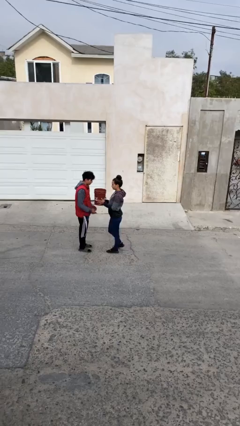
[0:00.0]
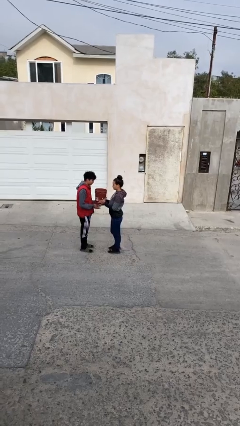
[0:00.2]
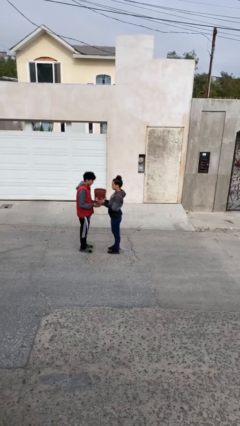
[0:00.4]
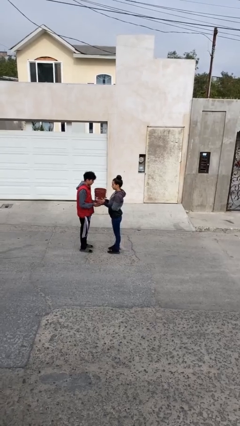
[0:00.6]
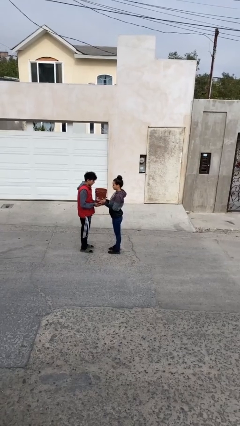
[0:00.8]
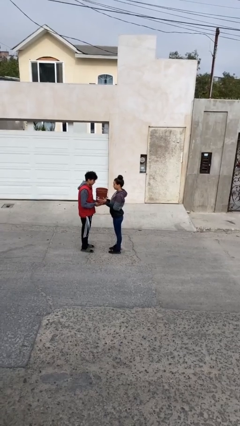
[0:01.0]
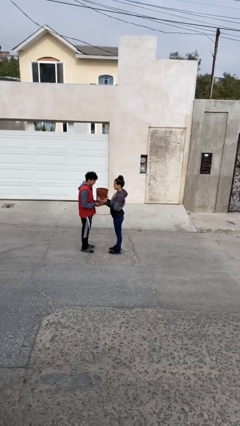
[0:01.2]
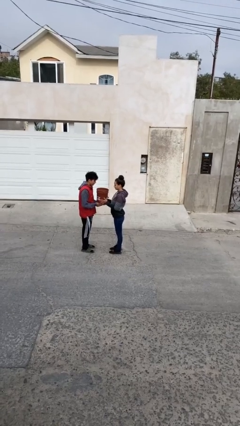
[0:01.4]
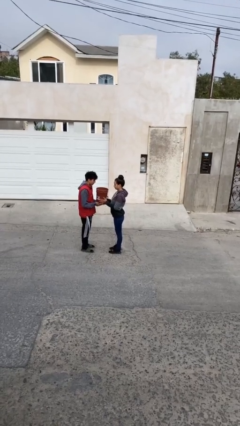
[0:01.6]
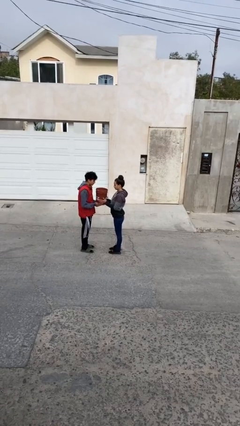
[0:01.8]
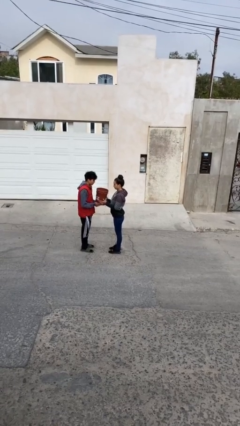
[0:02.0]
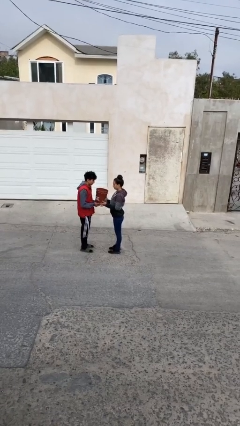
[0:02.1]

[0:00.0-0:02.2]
person transfers object to person

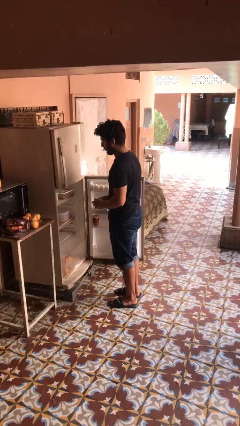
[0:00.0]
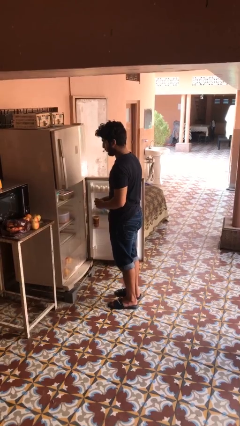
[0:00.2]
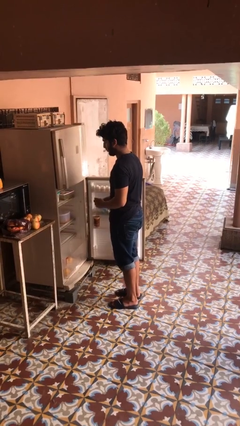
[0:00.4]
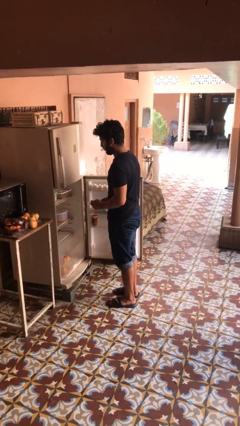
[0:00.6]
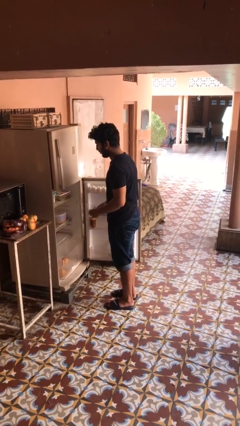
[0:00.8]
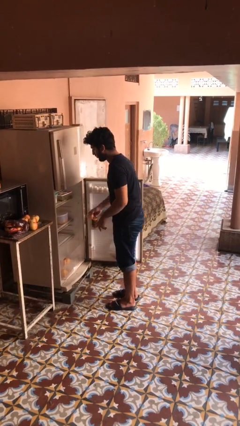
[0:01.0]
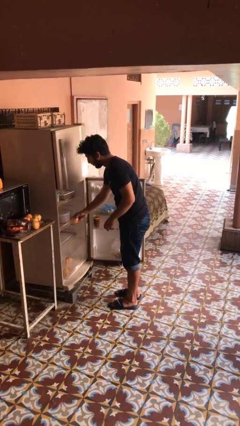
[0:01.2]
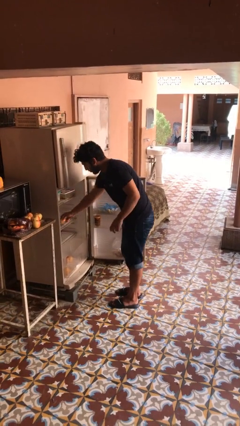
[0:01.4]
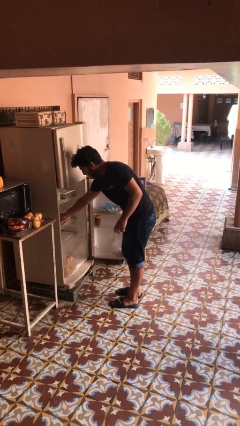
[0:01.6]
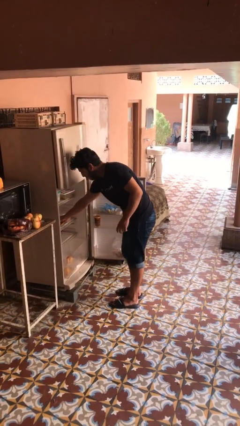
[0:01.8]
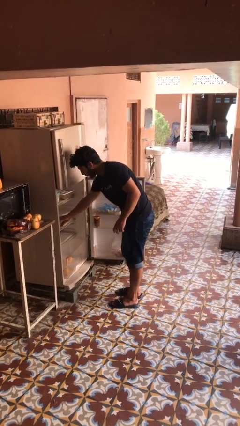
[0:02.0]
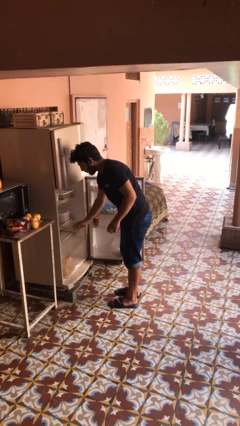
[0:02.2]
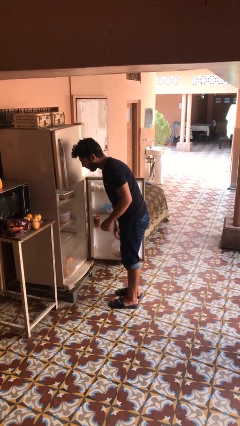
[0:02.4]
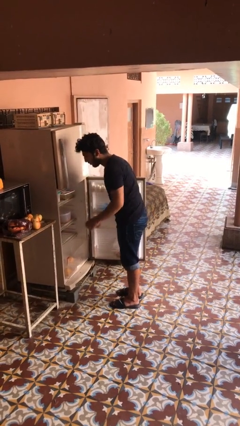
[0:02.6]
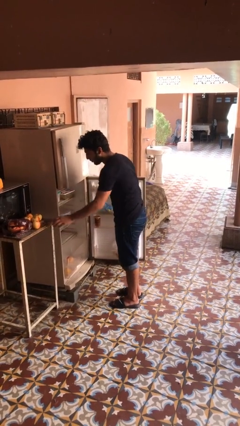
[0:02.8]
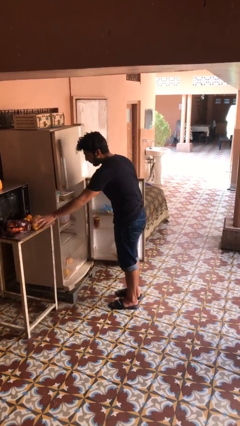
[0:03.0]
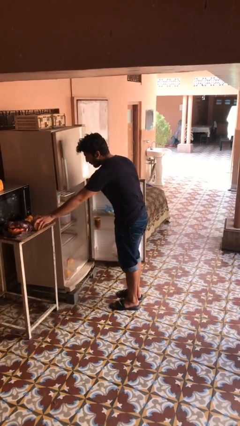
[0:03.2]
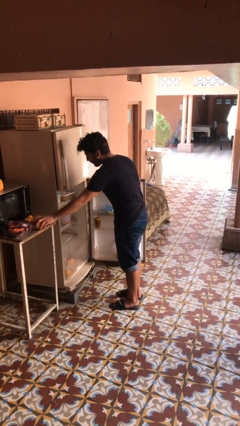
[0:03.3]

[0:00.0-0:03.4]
person loads groceries into refrigerator

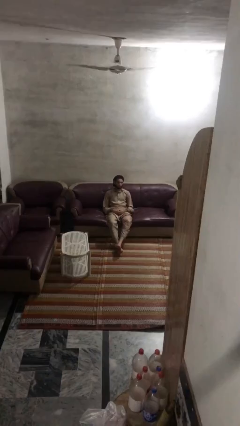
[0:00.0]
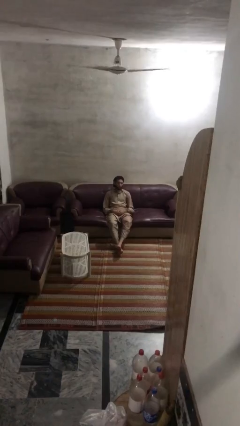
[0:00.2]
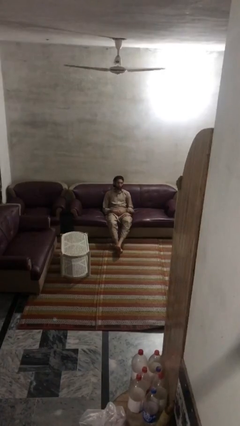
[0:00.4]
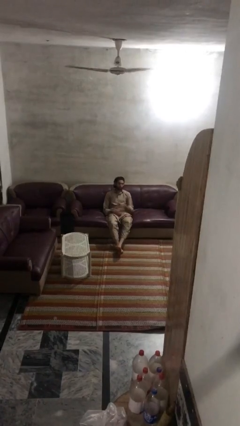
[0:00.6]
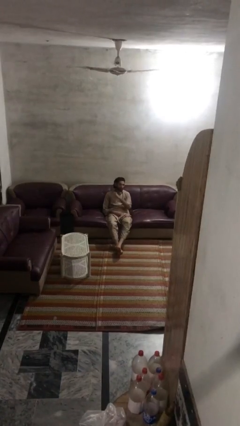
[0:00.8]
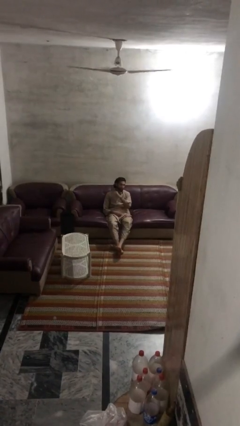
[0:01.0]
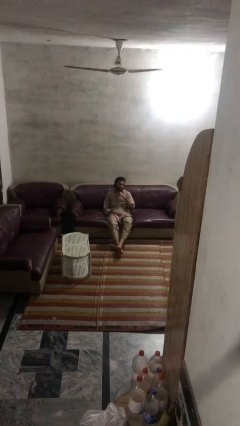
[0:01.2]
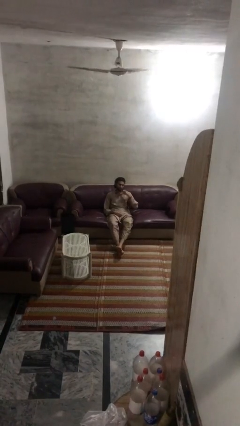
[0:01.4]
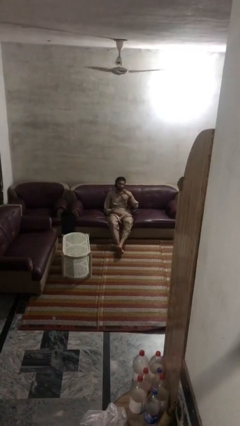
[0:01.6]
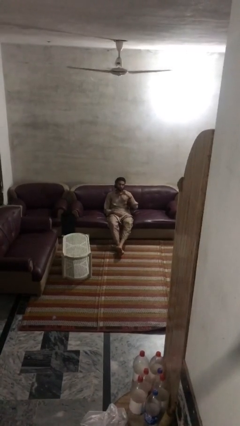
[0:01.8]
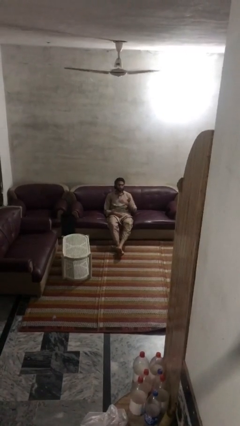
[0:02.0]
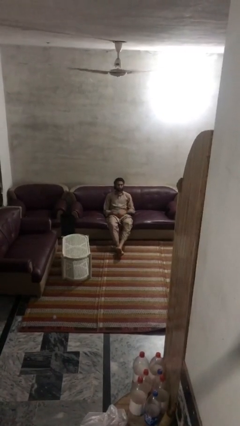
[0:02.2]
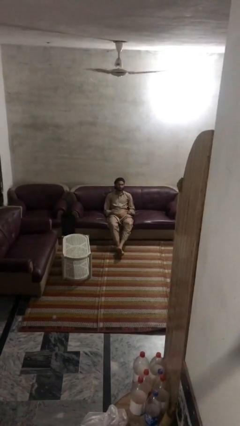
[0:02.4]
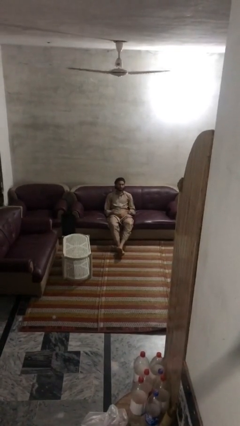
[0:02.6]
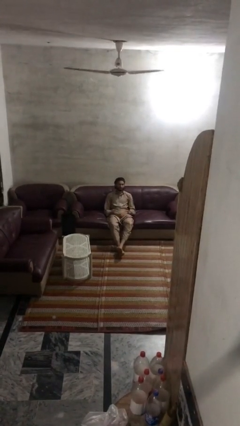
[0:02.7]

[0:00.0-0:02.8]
person gestures cut

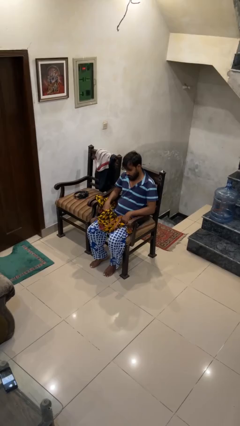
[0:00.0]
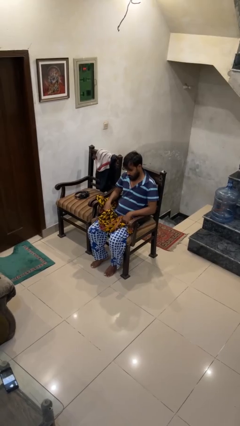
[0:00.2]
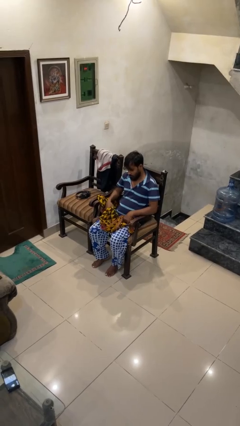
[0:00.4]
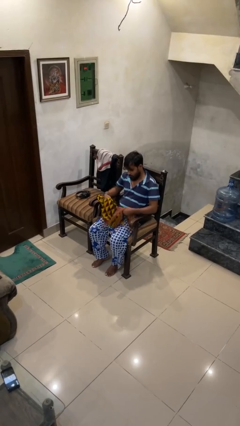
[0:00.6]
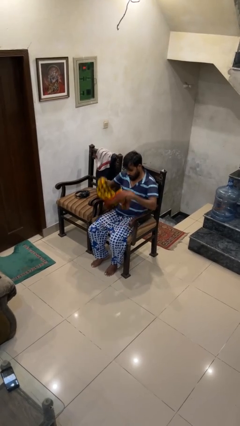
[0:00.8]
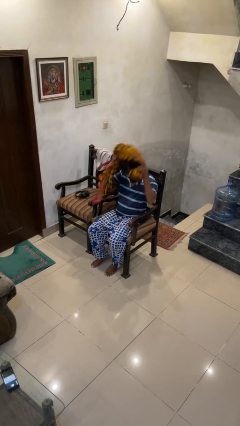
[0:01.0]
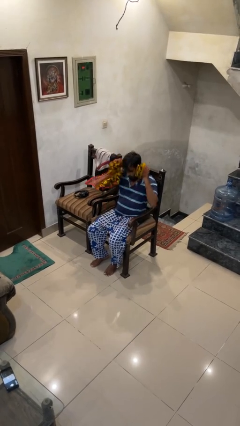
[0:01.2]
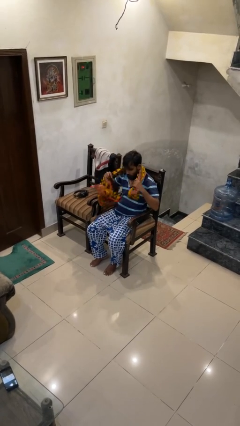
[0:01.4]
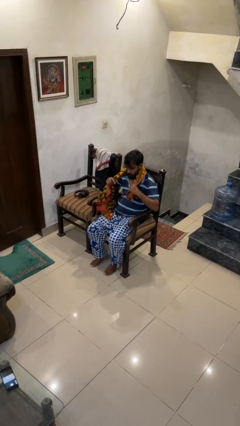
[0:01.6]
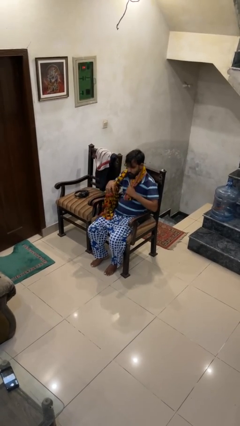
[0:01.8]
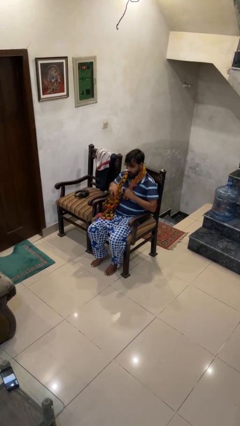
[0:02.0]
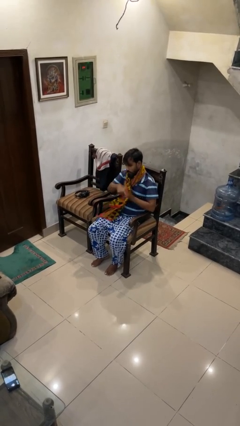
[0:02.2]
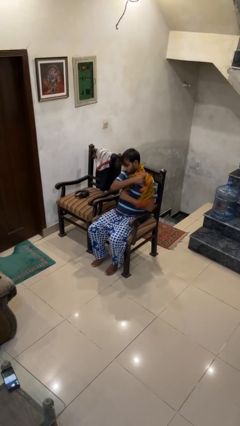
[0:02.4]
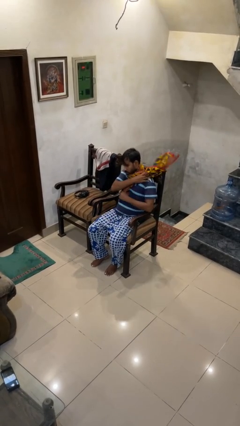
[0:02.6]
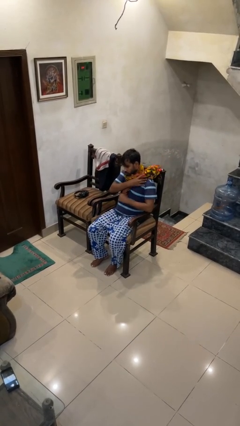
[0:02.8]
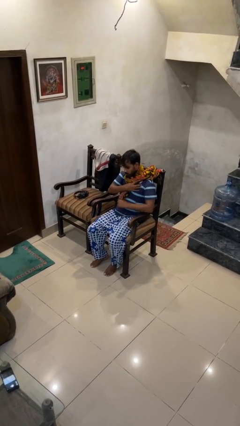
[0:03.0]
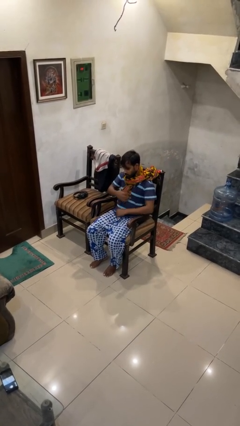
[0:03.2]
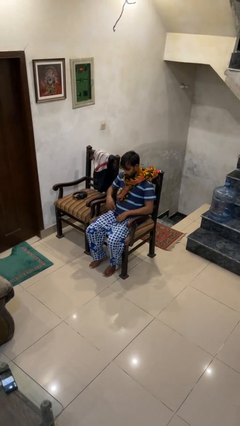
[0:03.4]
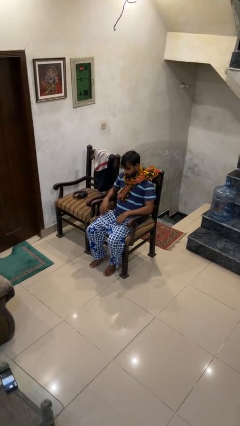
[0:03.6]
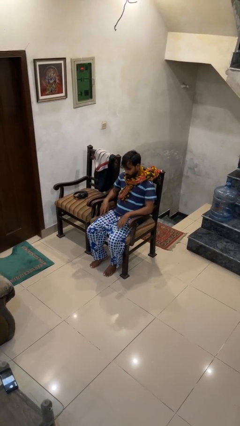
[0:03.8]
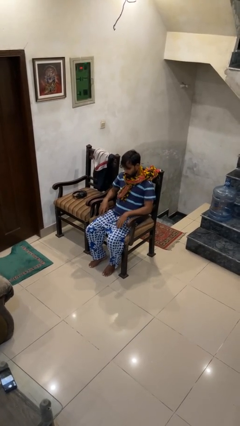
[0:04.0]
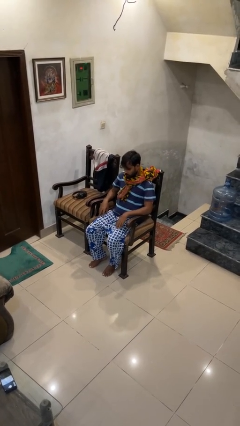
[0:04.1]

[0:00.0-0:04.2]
person puts on scarf

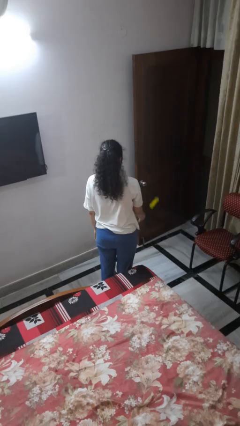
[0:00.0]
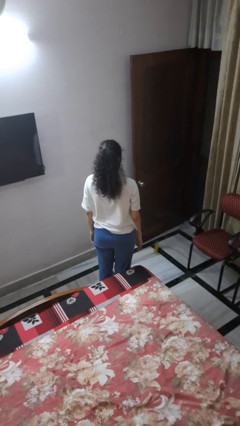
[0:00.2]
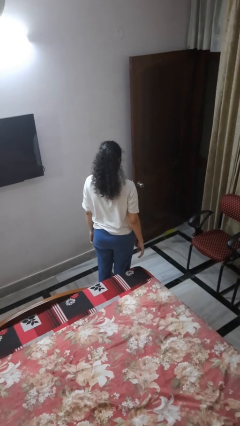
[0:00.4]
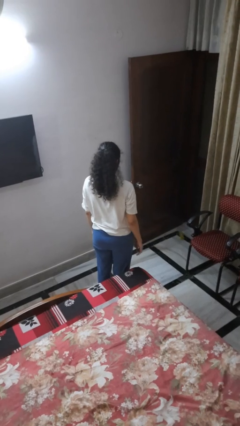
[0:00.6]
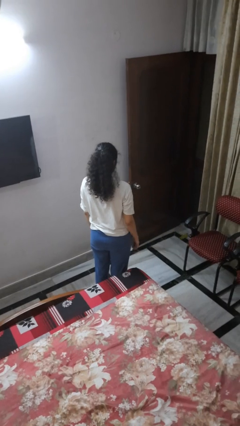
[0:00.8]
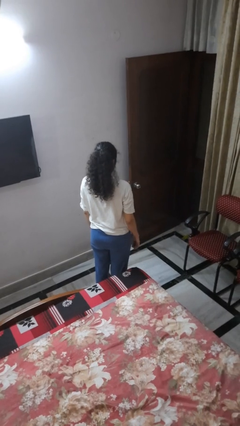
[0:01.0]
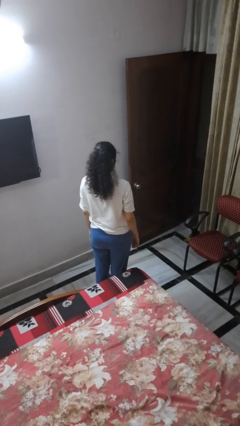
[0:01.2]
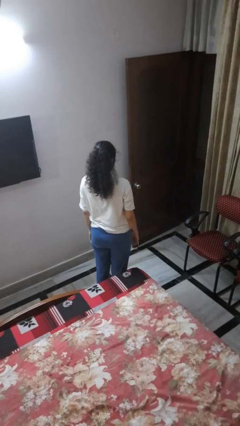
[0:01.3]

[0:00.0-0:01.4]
person throws object to ground

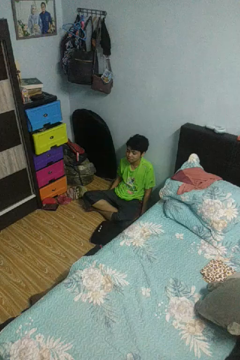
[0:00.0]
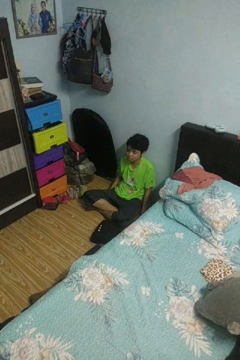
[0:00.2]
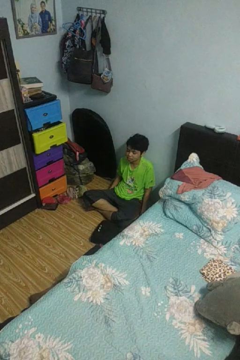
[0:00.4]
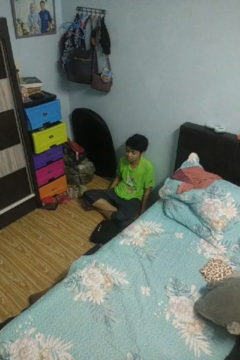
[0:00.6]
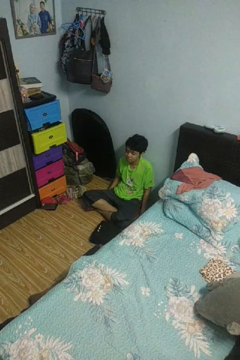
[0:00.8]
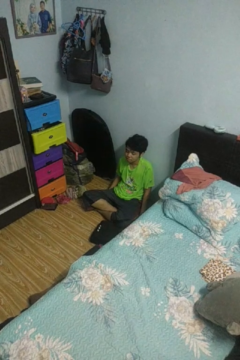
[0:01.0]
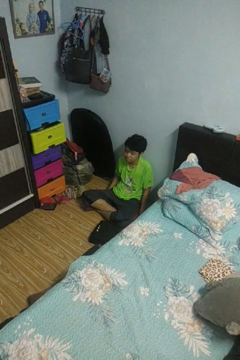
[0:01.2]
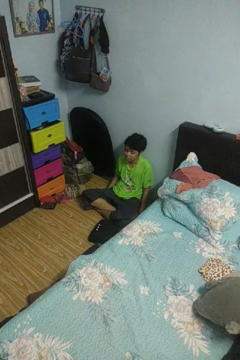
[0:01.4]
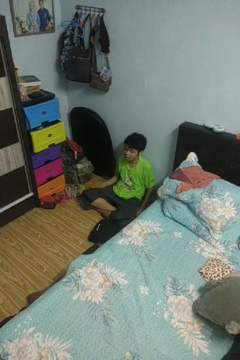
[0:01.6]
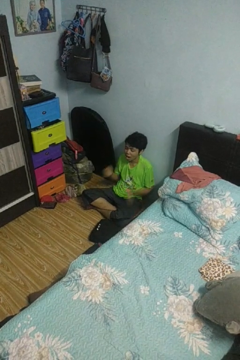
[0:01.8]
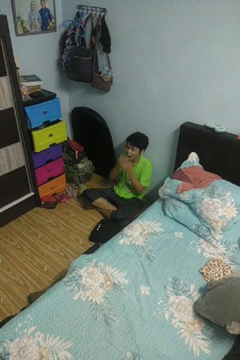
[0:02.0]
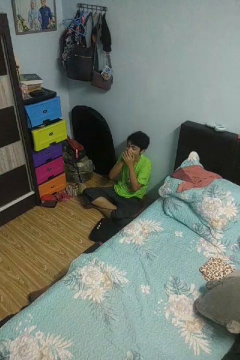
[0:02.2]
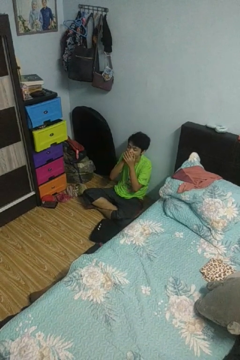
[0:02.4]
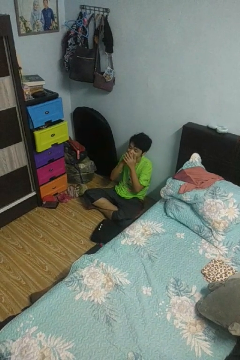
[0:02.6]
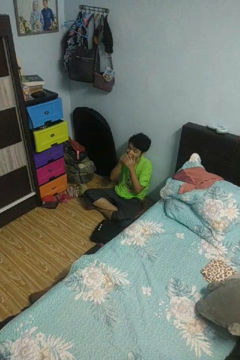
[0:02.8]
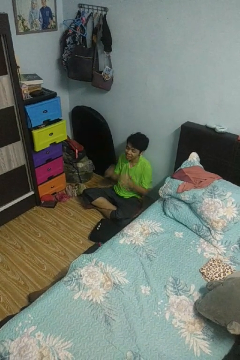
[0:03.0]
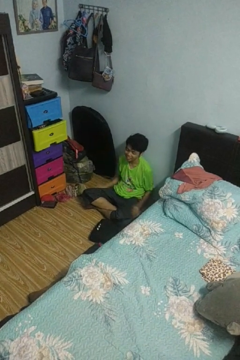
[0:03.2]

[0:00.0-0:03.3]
person yawns

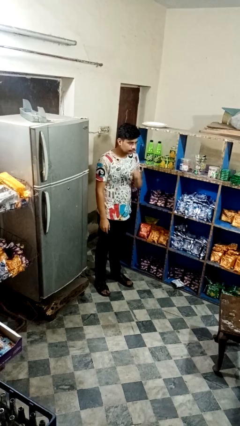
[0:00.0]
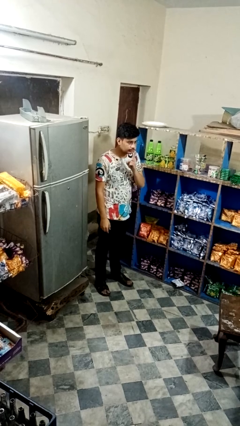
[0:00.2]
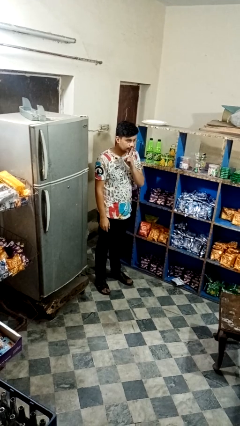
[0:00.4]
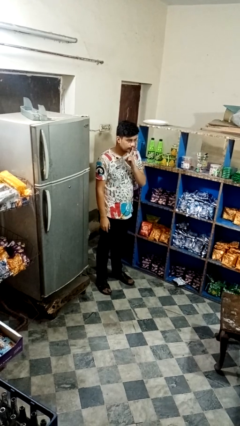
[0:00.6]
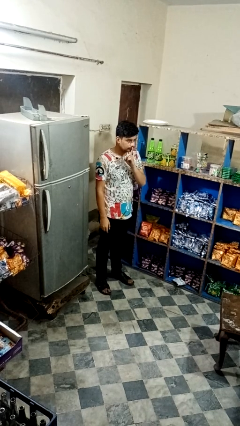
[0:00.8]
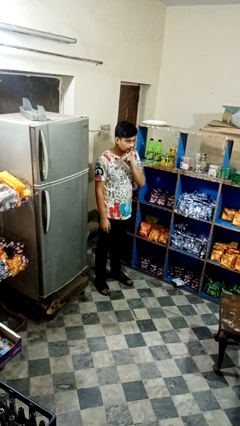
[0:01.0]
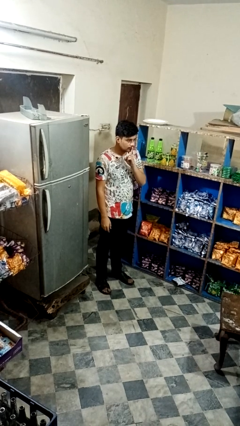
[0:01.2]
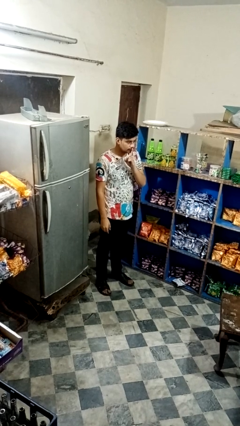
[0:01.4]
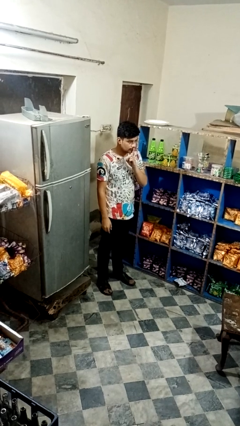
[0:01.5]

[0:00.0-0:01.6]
person gestures be quiet
